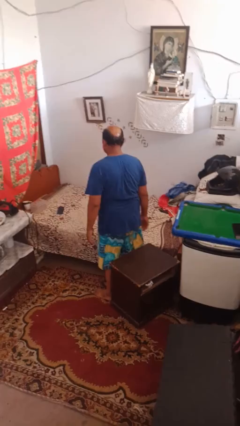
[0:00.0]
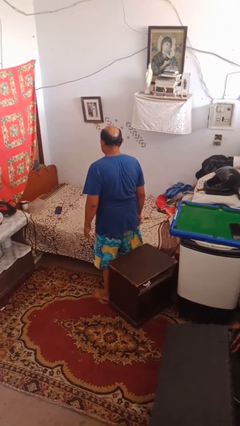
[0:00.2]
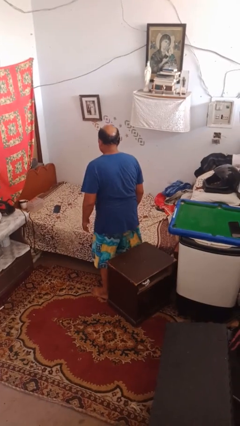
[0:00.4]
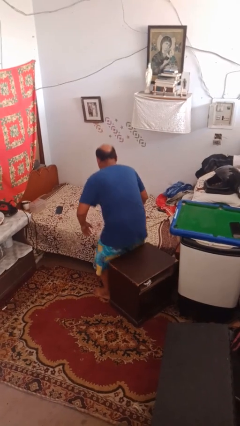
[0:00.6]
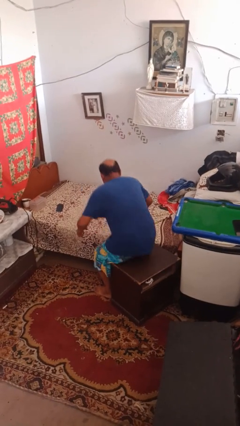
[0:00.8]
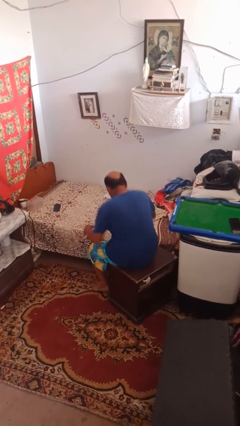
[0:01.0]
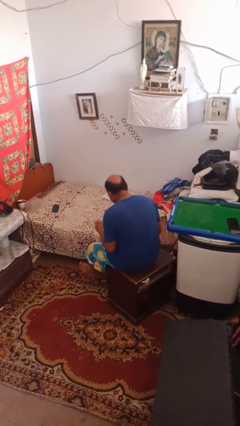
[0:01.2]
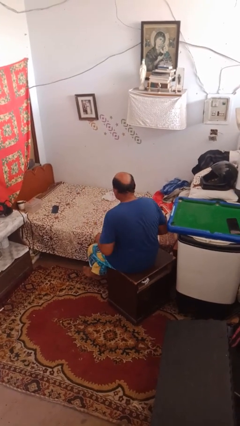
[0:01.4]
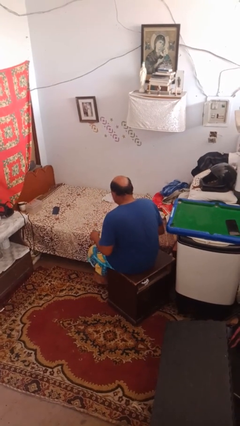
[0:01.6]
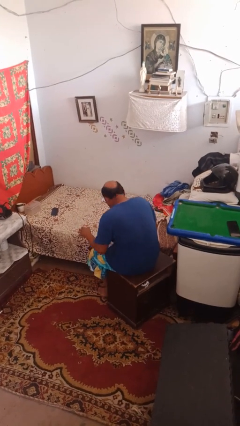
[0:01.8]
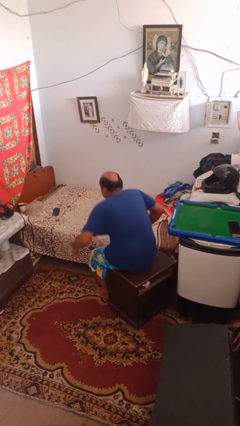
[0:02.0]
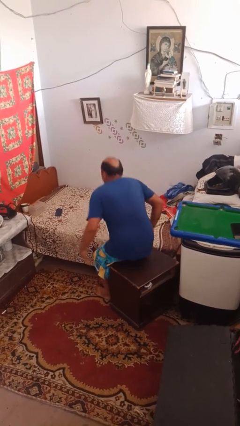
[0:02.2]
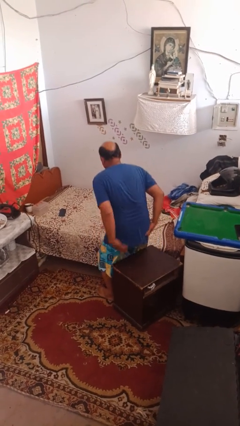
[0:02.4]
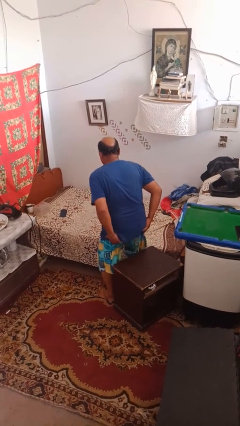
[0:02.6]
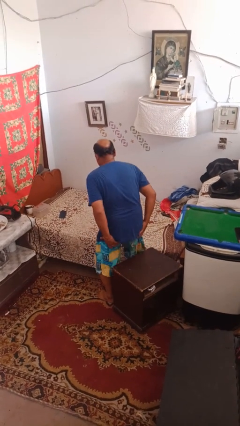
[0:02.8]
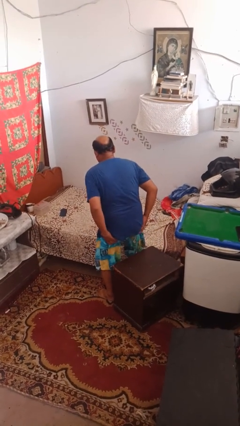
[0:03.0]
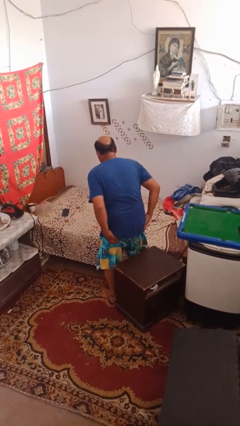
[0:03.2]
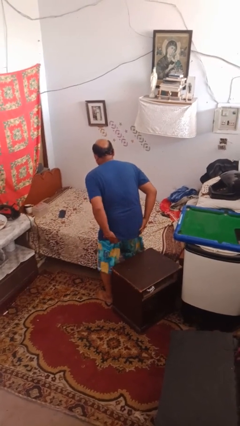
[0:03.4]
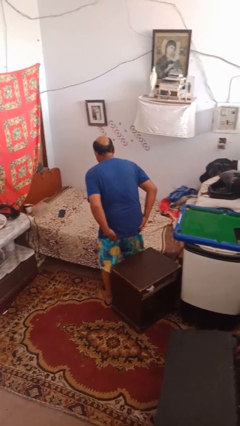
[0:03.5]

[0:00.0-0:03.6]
person bumps into table

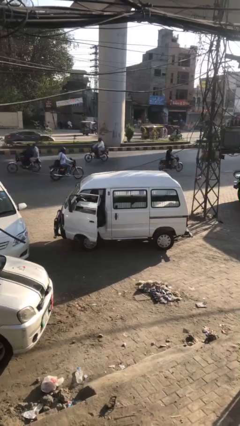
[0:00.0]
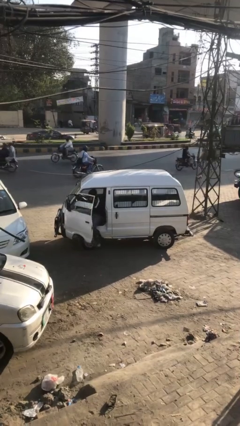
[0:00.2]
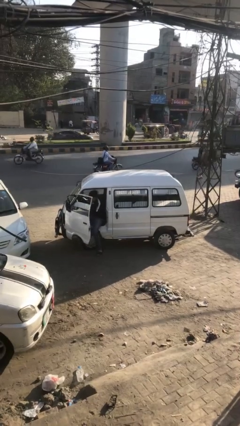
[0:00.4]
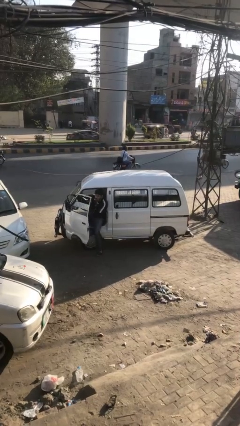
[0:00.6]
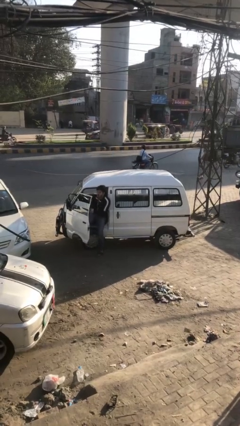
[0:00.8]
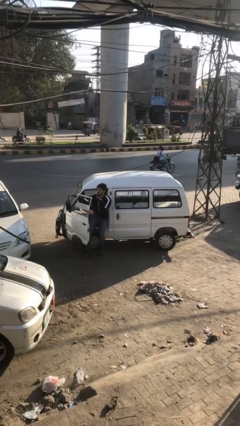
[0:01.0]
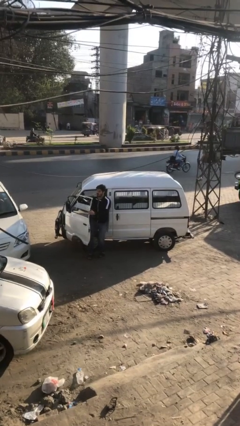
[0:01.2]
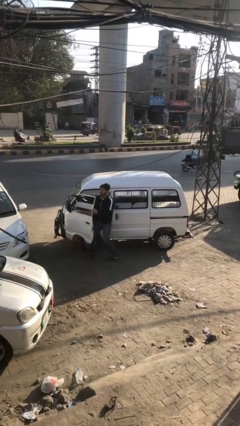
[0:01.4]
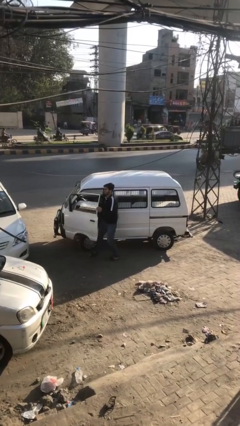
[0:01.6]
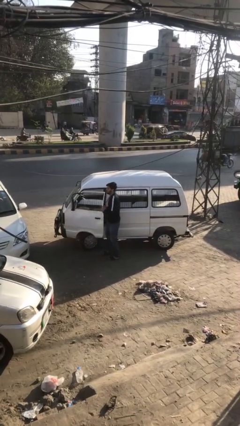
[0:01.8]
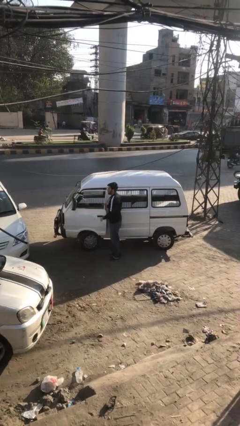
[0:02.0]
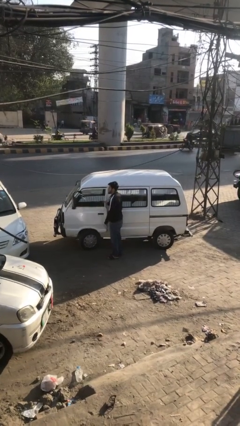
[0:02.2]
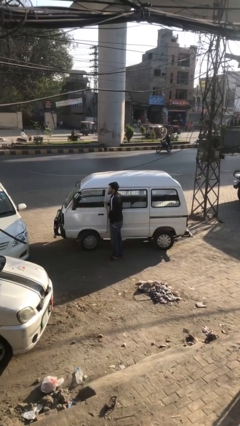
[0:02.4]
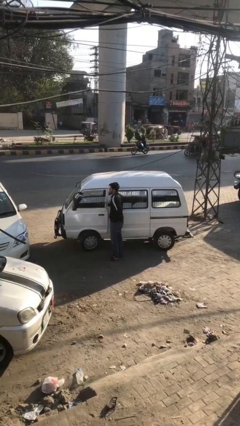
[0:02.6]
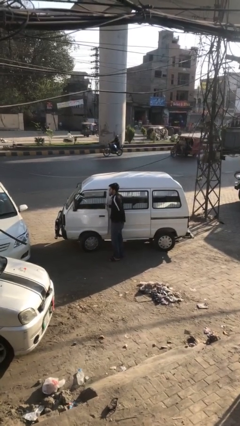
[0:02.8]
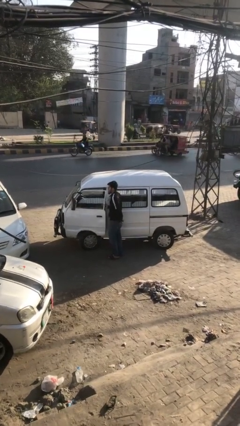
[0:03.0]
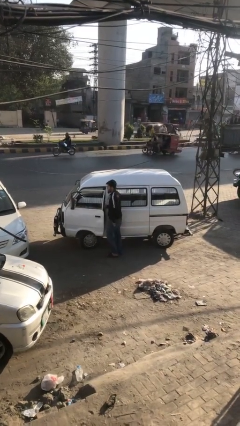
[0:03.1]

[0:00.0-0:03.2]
car drops off person

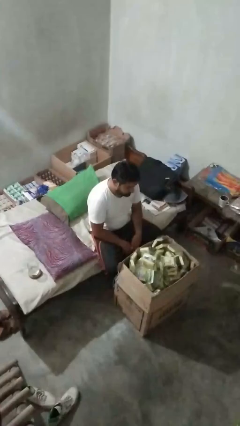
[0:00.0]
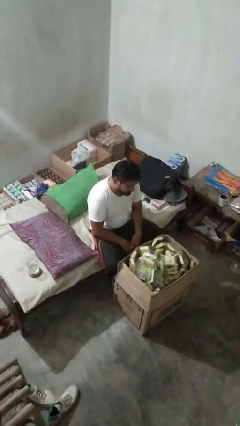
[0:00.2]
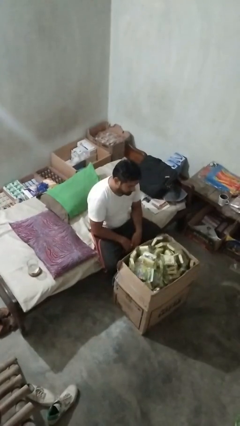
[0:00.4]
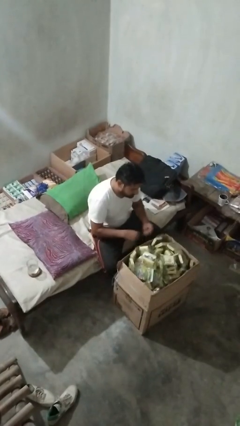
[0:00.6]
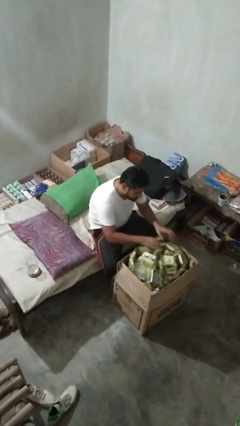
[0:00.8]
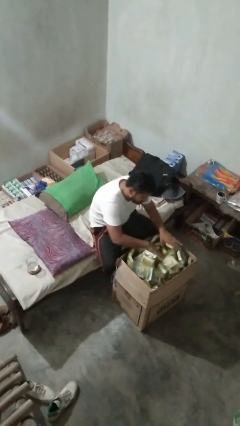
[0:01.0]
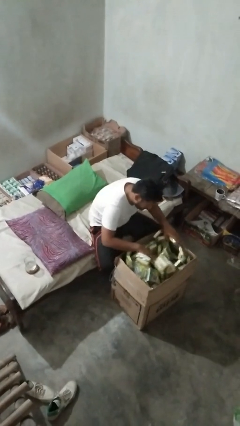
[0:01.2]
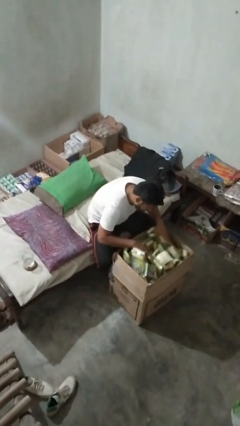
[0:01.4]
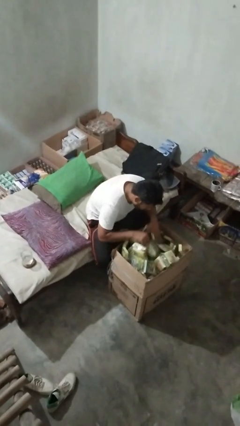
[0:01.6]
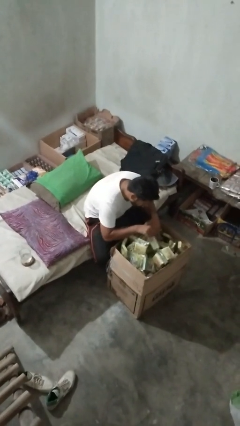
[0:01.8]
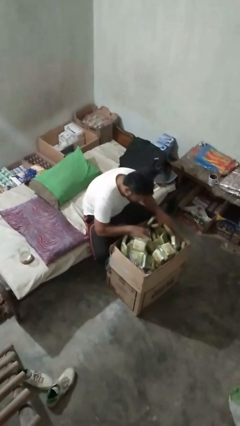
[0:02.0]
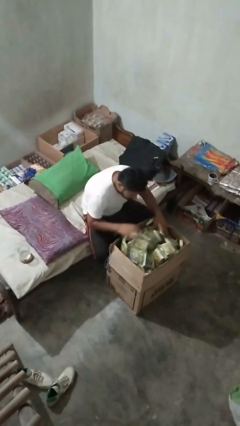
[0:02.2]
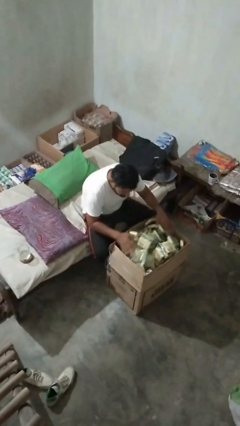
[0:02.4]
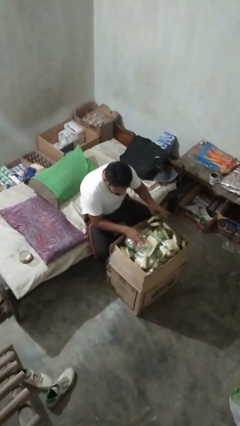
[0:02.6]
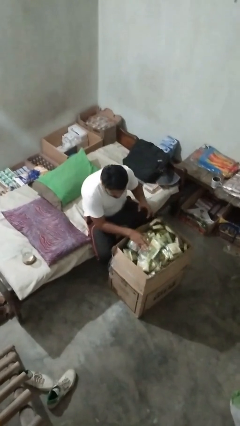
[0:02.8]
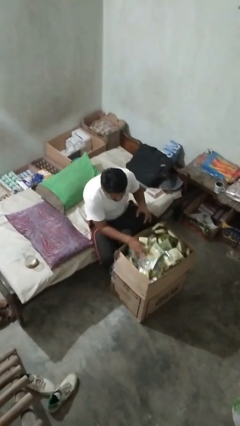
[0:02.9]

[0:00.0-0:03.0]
person searches in box

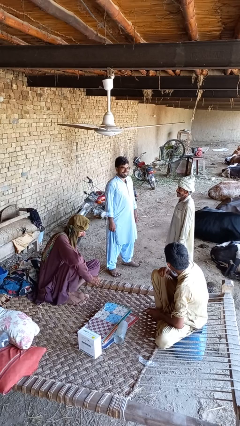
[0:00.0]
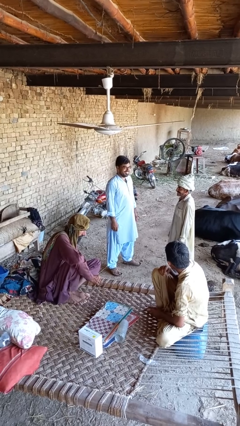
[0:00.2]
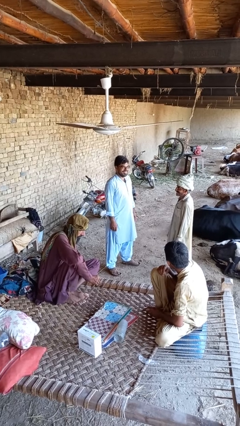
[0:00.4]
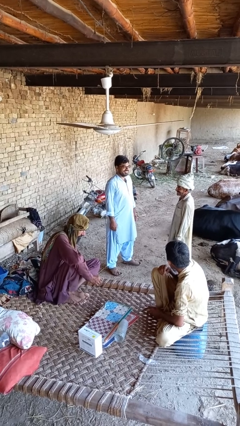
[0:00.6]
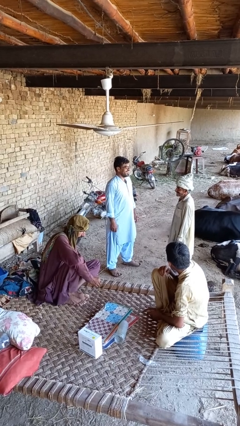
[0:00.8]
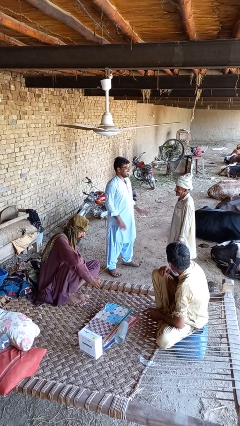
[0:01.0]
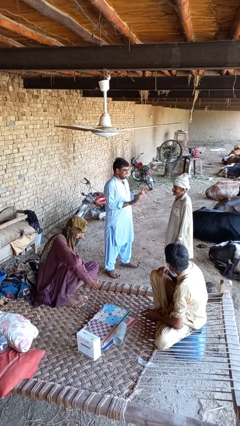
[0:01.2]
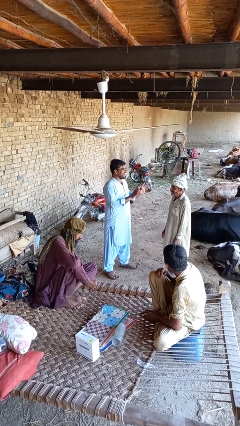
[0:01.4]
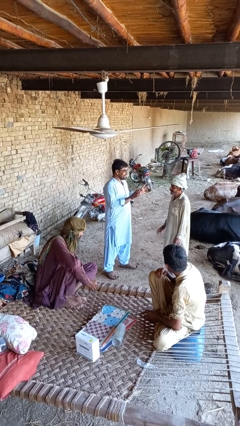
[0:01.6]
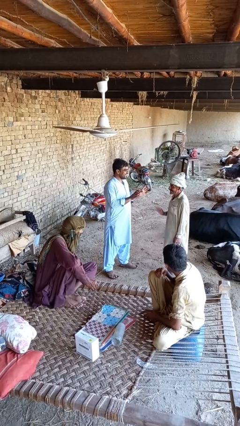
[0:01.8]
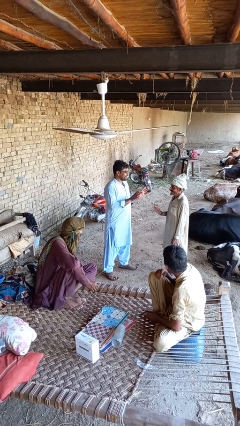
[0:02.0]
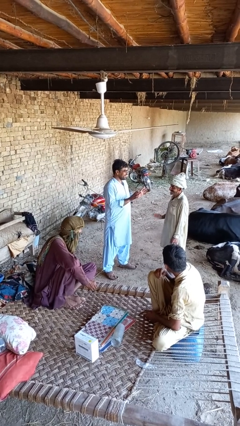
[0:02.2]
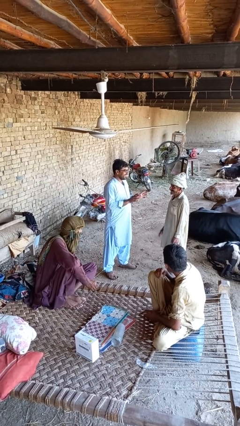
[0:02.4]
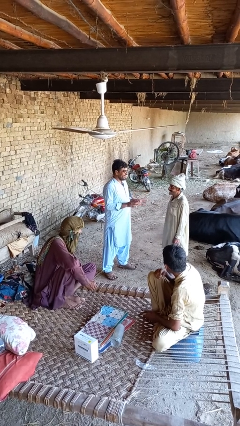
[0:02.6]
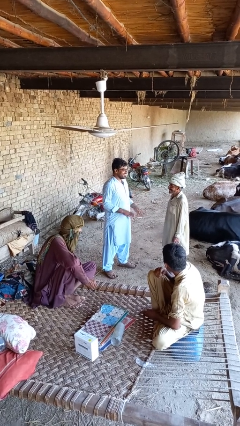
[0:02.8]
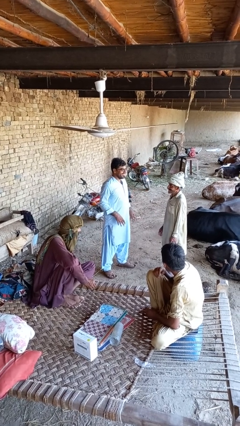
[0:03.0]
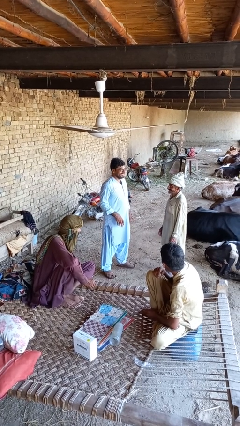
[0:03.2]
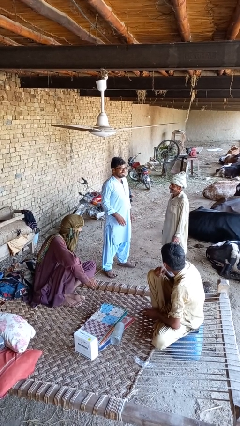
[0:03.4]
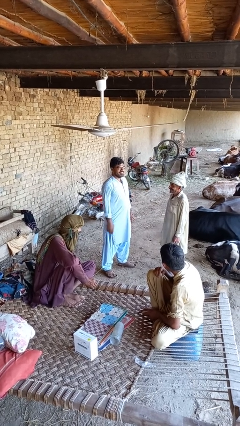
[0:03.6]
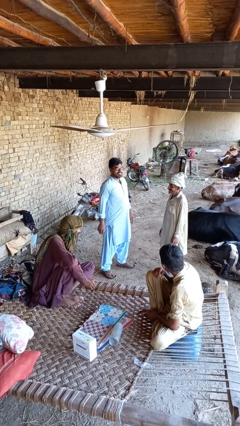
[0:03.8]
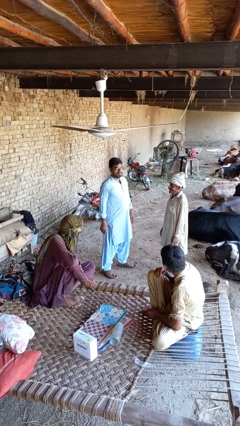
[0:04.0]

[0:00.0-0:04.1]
person laughs with person

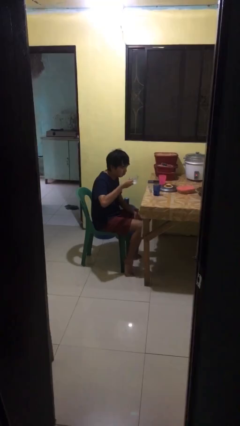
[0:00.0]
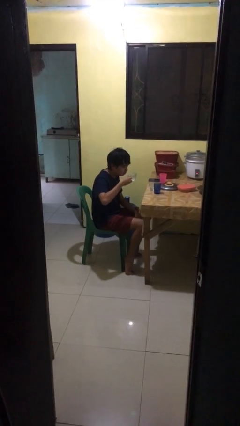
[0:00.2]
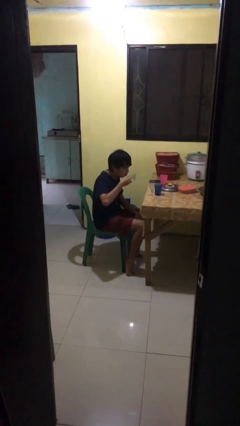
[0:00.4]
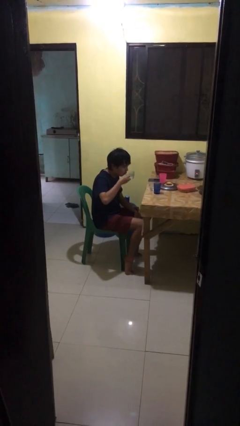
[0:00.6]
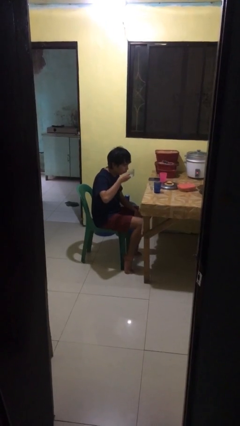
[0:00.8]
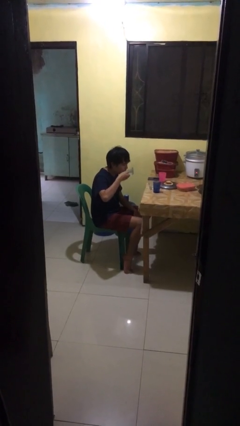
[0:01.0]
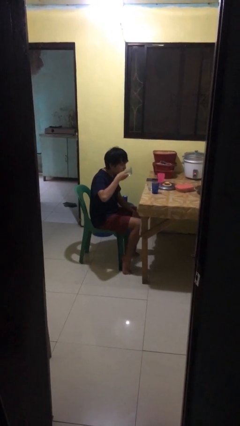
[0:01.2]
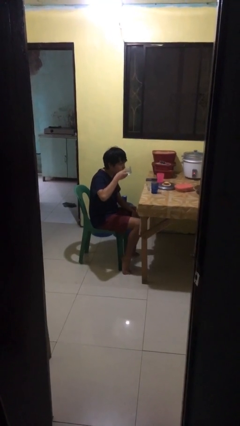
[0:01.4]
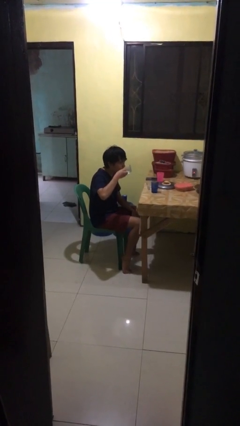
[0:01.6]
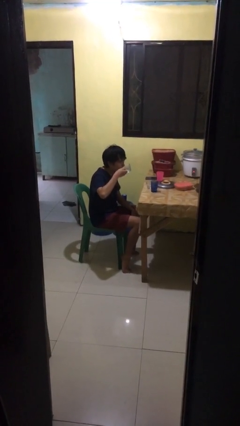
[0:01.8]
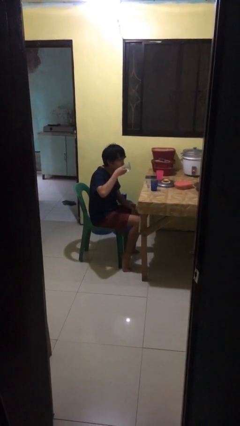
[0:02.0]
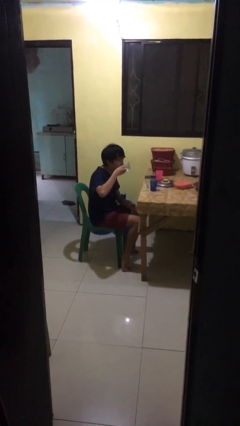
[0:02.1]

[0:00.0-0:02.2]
person drinks from shotglass

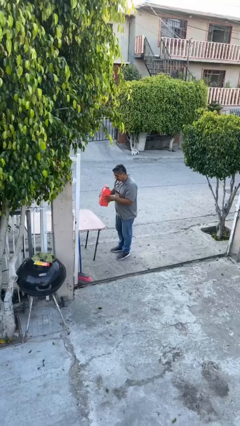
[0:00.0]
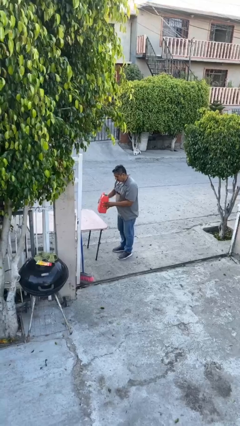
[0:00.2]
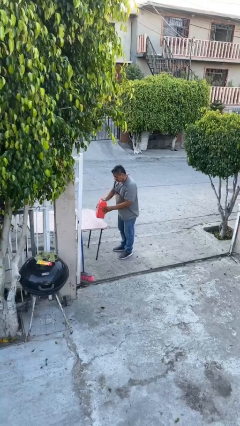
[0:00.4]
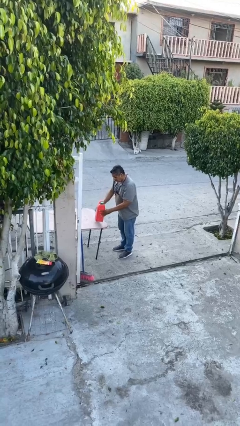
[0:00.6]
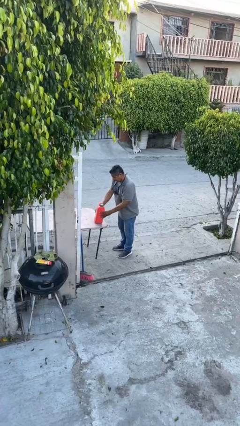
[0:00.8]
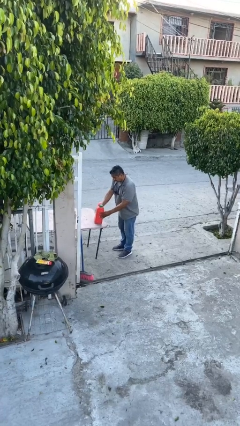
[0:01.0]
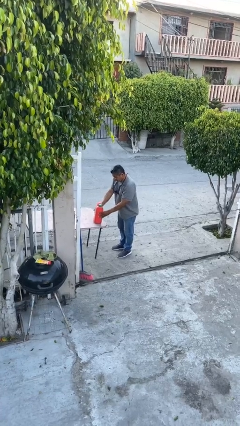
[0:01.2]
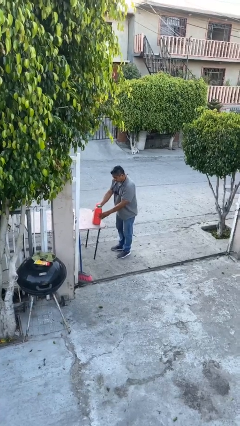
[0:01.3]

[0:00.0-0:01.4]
person puts down object on table
